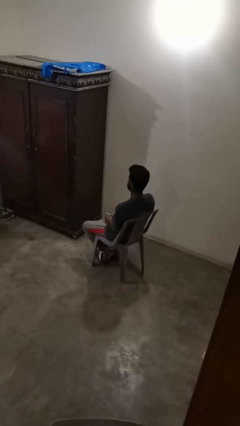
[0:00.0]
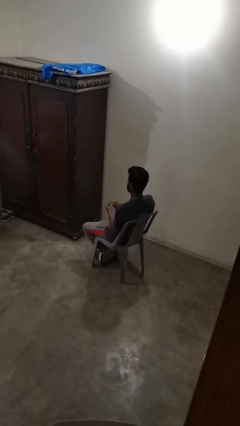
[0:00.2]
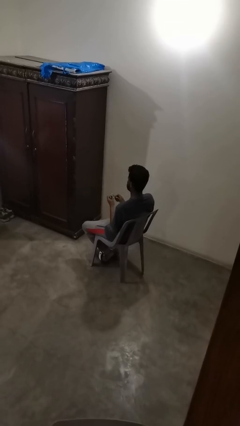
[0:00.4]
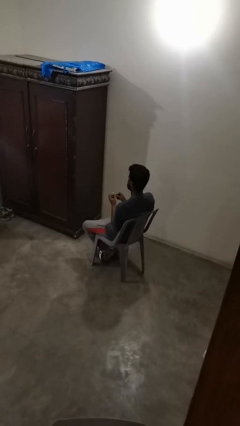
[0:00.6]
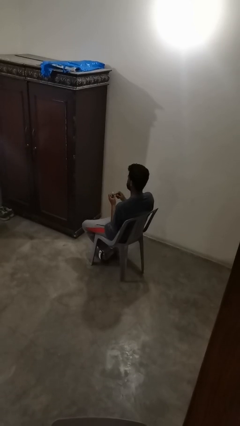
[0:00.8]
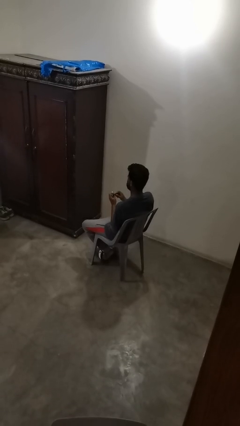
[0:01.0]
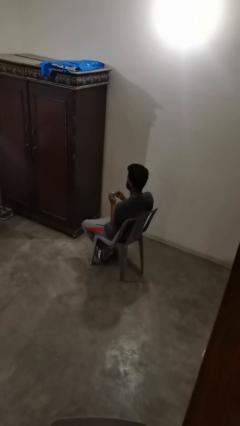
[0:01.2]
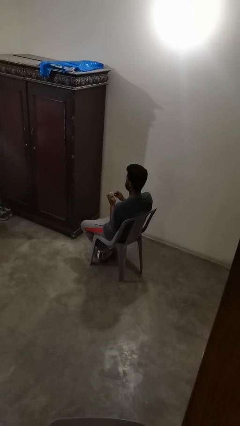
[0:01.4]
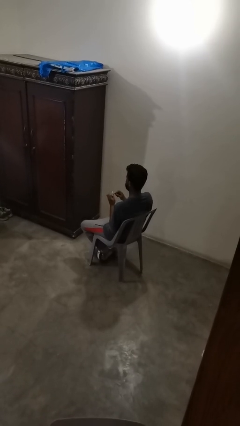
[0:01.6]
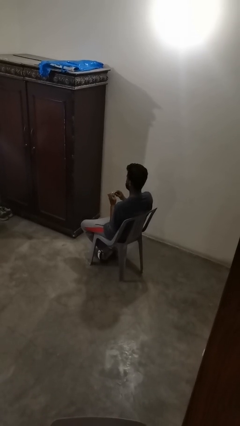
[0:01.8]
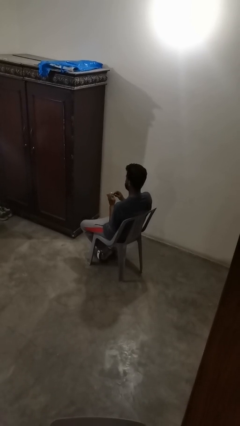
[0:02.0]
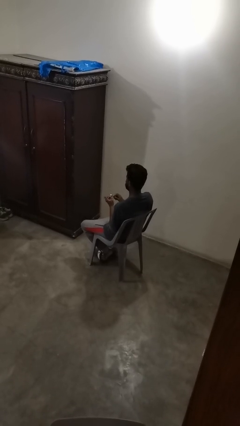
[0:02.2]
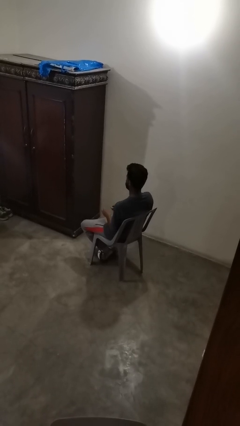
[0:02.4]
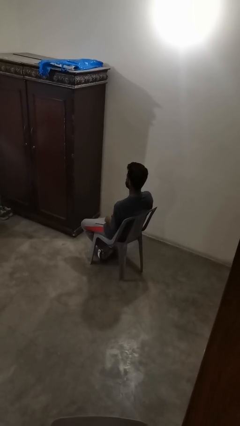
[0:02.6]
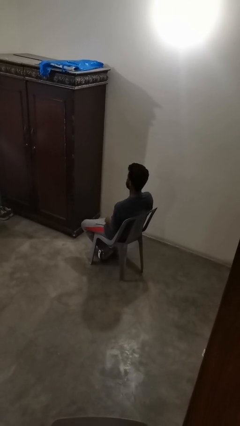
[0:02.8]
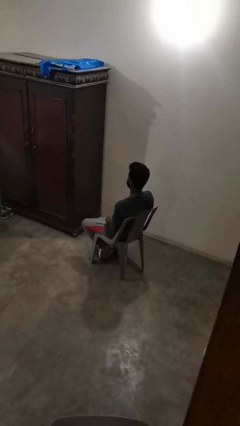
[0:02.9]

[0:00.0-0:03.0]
person files fingernails

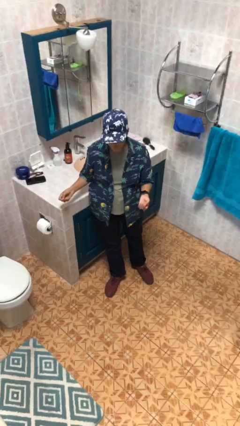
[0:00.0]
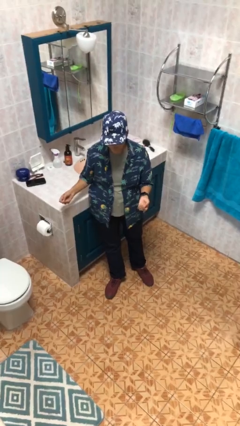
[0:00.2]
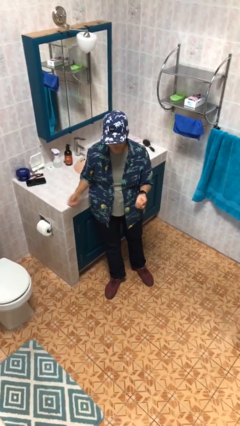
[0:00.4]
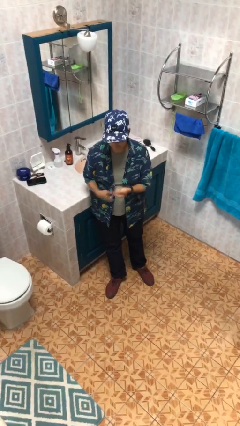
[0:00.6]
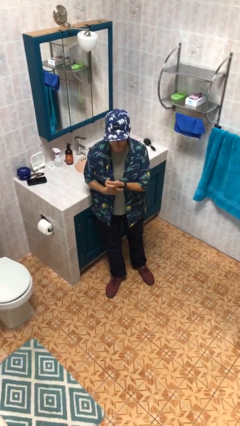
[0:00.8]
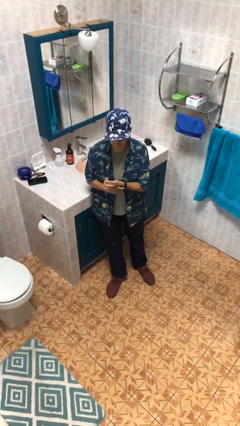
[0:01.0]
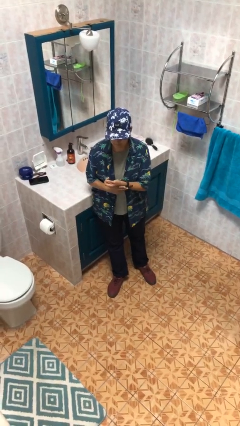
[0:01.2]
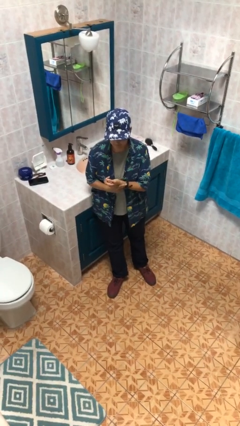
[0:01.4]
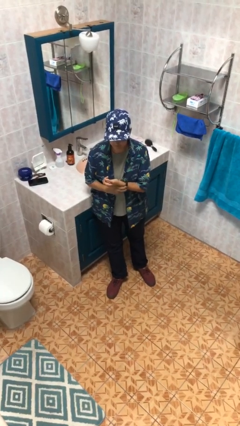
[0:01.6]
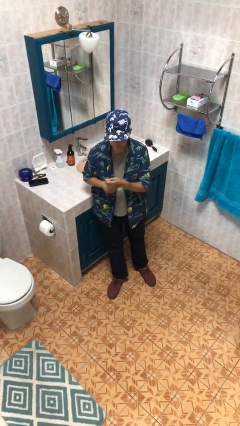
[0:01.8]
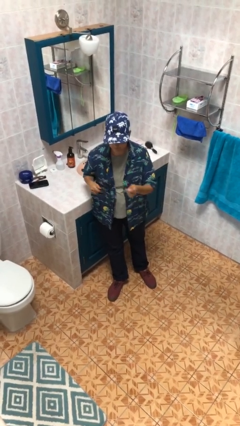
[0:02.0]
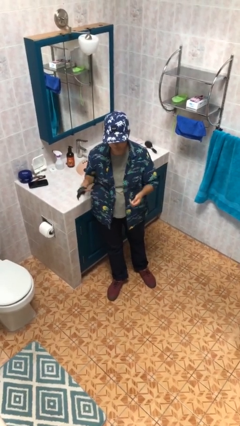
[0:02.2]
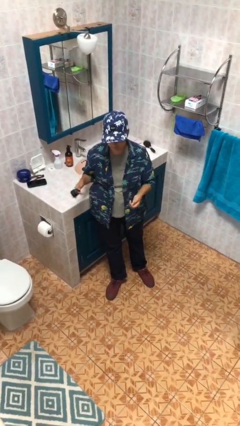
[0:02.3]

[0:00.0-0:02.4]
person takes off wristwatch

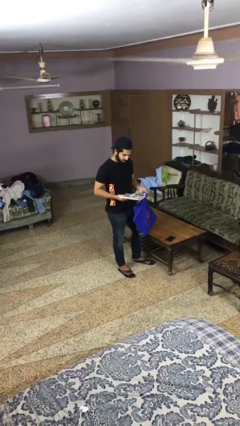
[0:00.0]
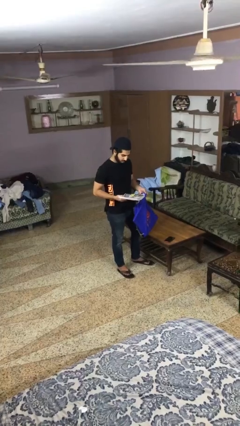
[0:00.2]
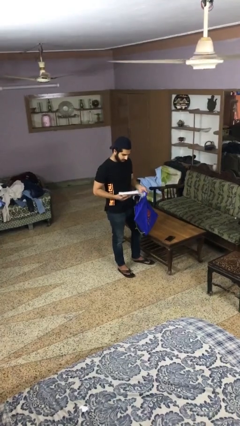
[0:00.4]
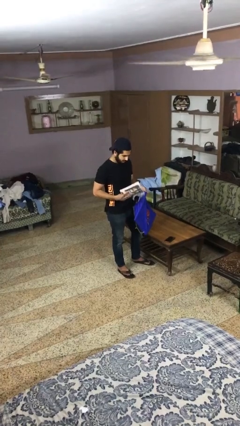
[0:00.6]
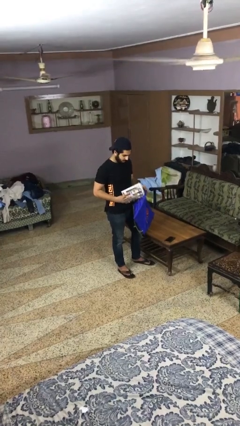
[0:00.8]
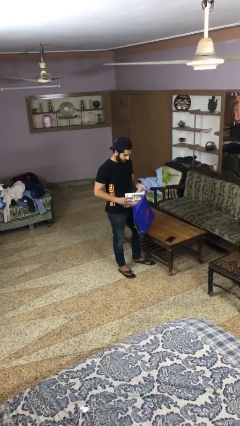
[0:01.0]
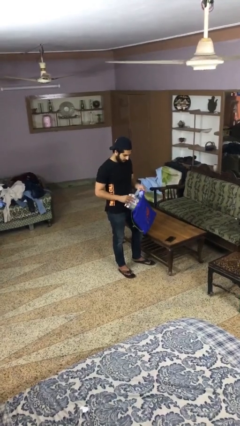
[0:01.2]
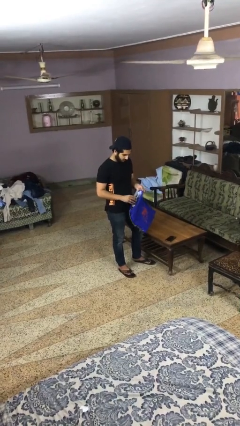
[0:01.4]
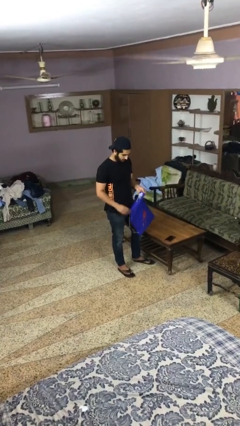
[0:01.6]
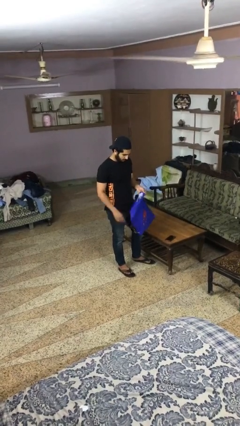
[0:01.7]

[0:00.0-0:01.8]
person puts object into bag

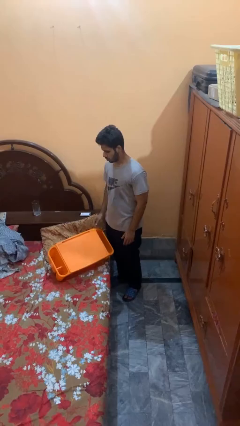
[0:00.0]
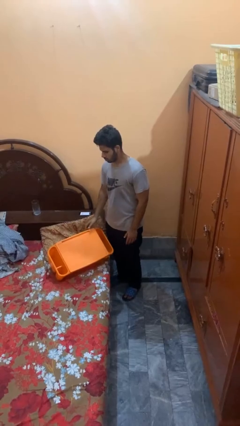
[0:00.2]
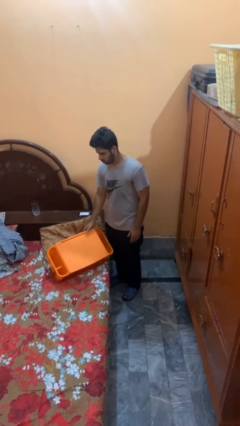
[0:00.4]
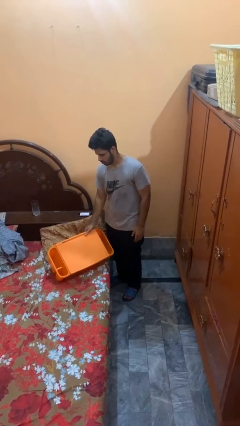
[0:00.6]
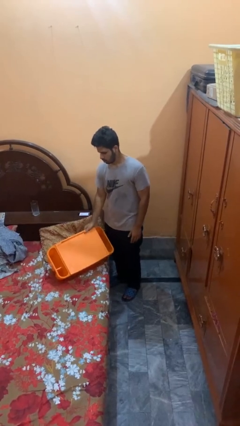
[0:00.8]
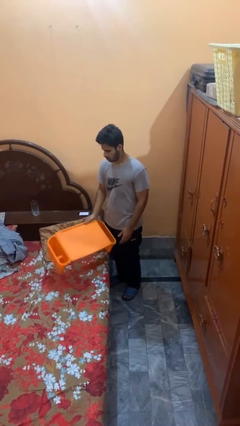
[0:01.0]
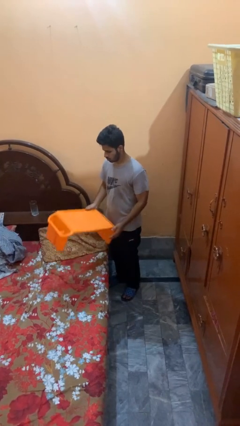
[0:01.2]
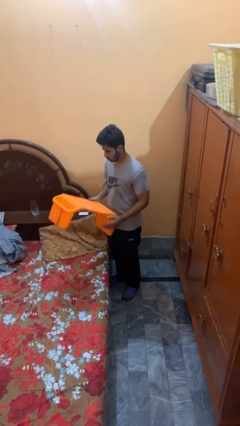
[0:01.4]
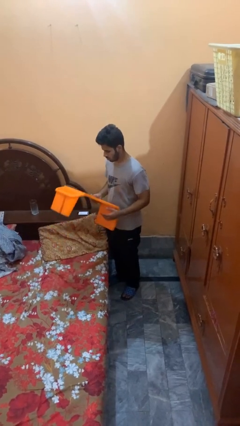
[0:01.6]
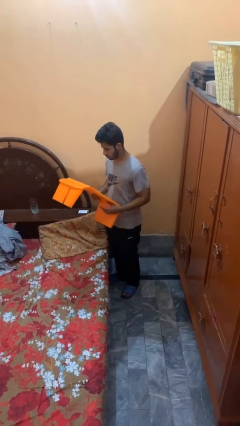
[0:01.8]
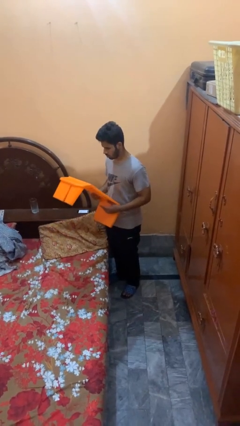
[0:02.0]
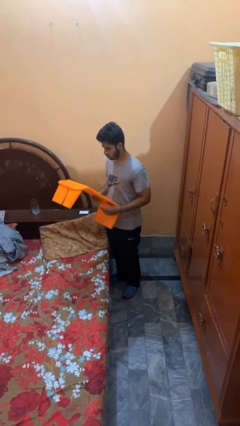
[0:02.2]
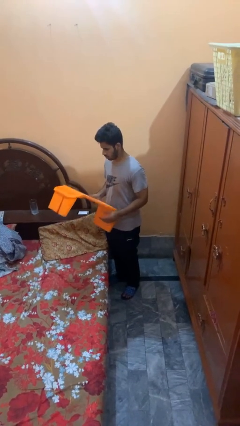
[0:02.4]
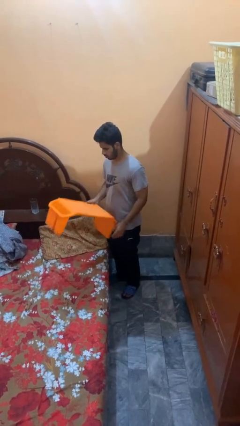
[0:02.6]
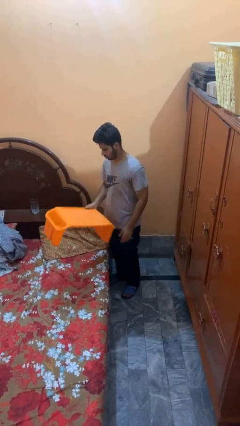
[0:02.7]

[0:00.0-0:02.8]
person picks up object from bed

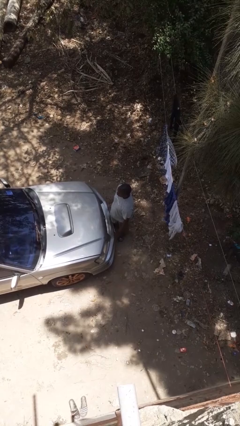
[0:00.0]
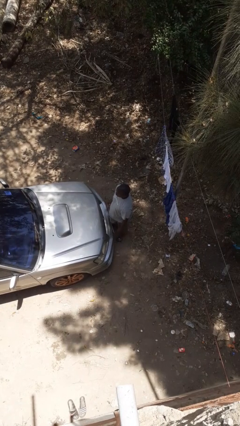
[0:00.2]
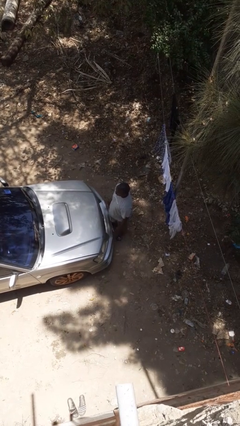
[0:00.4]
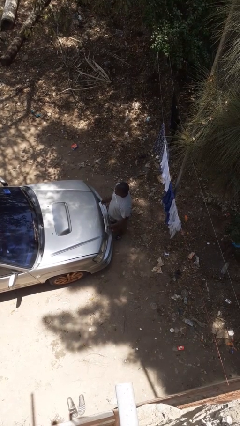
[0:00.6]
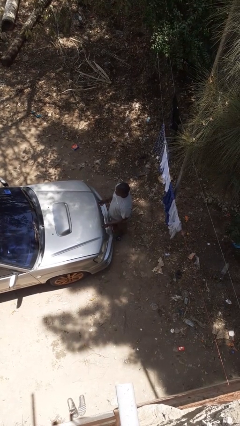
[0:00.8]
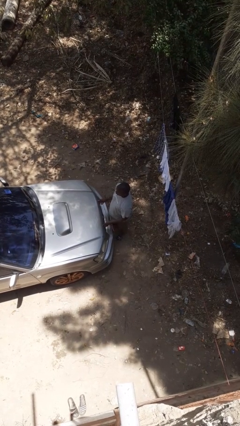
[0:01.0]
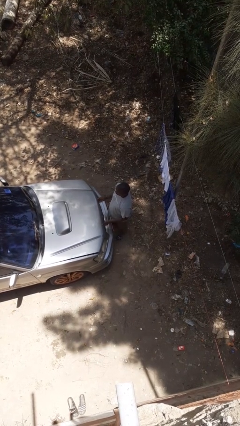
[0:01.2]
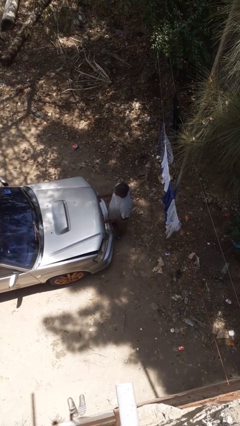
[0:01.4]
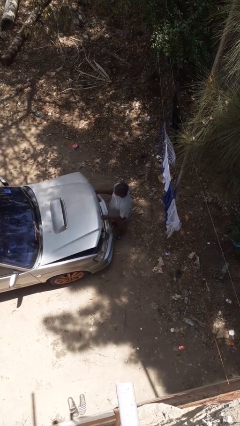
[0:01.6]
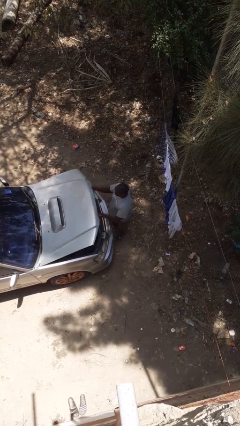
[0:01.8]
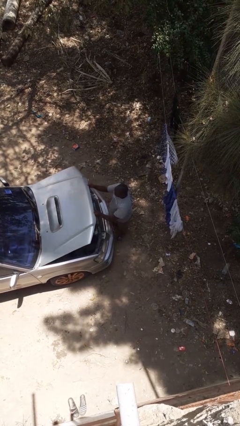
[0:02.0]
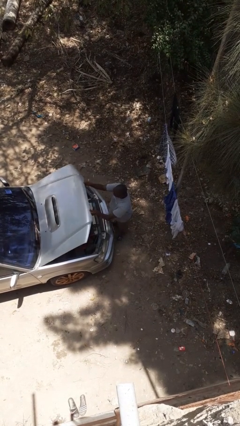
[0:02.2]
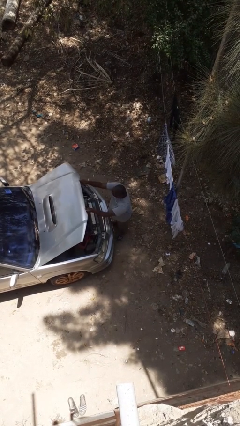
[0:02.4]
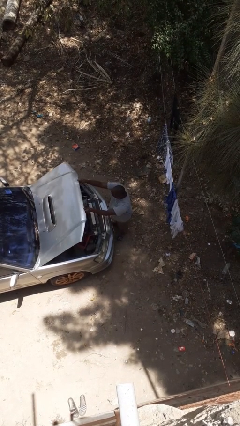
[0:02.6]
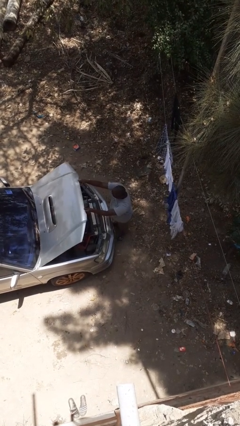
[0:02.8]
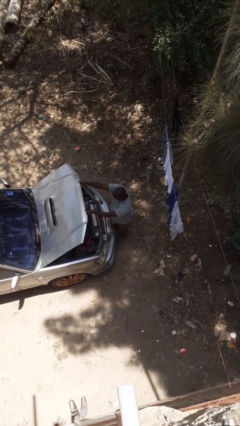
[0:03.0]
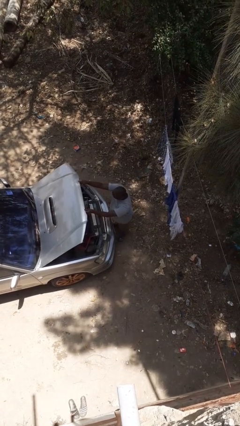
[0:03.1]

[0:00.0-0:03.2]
person opens car hood

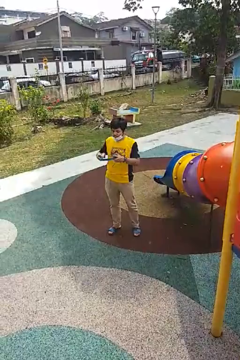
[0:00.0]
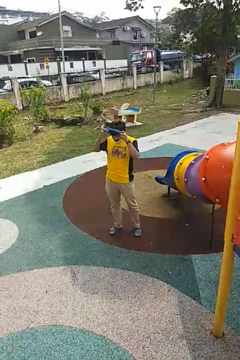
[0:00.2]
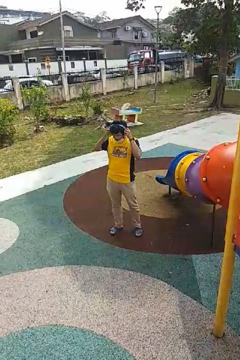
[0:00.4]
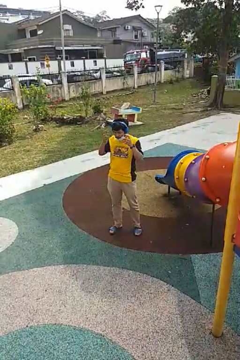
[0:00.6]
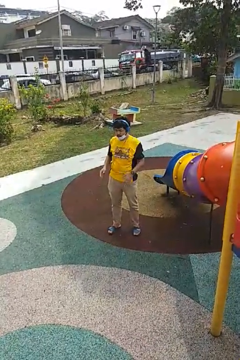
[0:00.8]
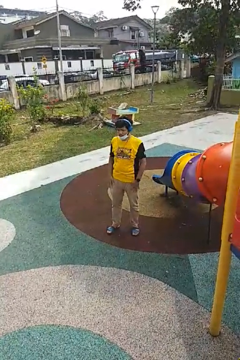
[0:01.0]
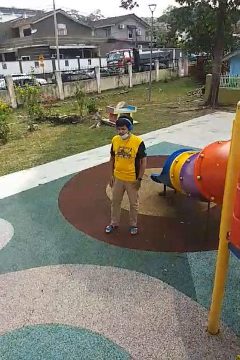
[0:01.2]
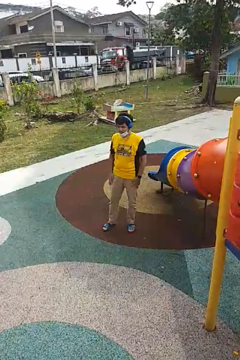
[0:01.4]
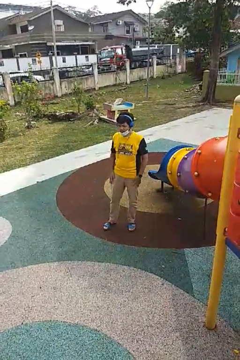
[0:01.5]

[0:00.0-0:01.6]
person puts on headphones

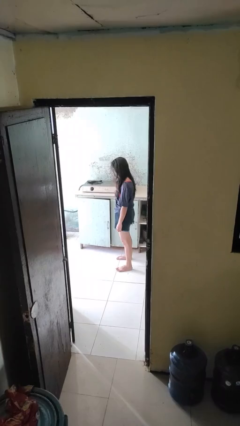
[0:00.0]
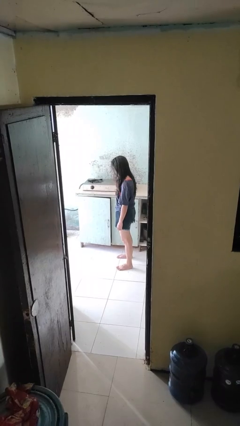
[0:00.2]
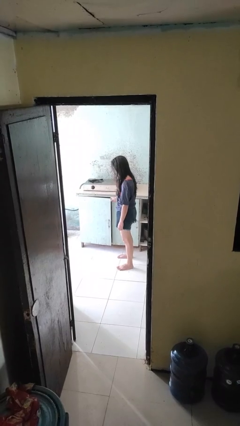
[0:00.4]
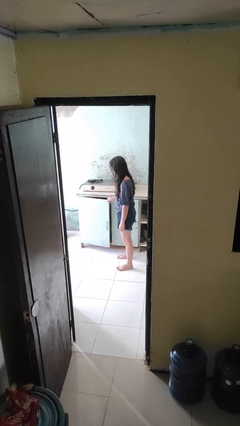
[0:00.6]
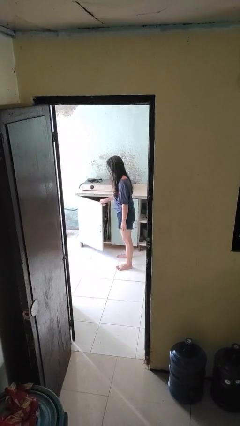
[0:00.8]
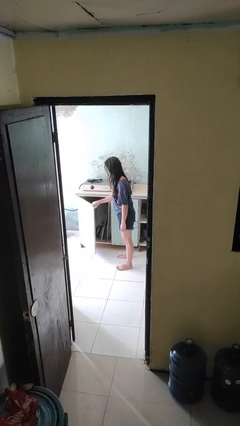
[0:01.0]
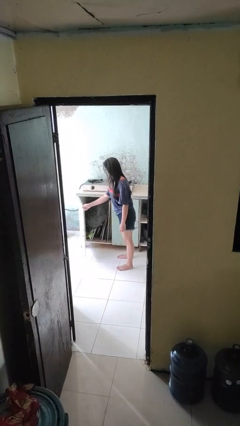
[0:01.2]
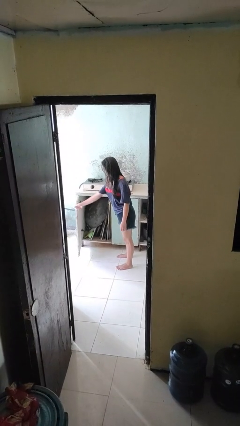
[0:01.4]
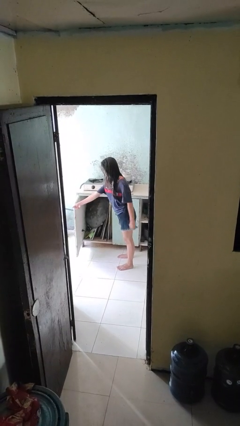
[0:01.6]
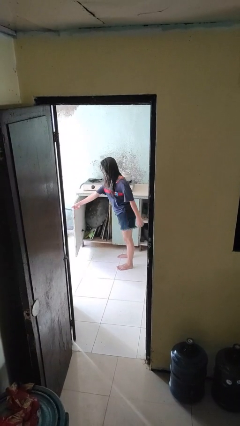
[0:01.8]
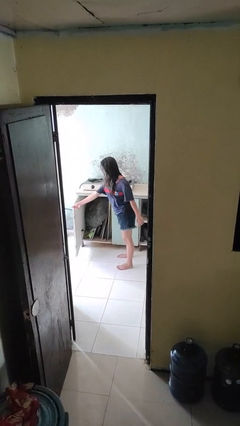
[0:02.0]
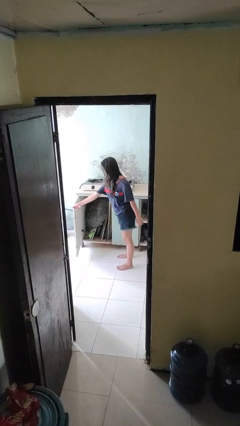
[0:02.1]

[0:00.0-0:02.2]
person opens cabinet

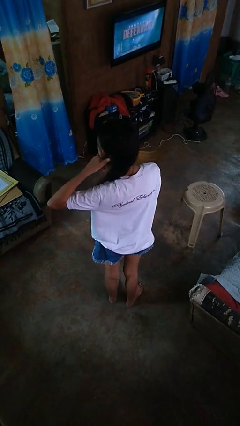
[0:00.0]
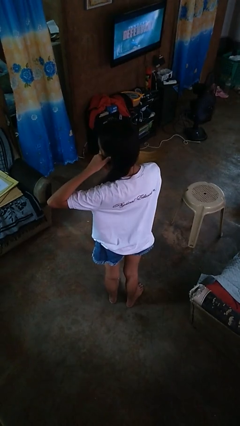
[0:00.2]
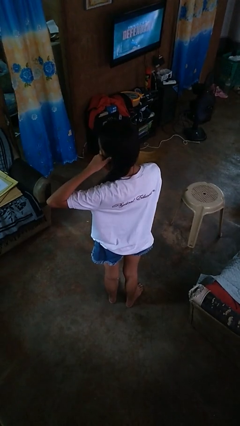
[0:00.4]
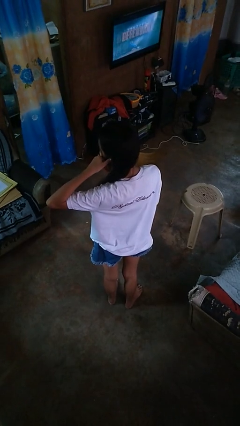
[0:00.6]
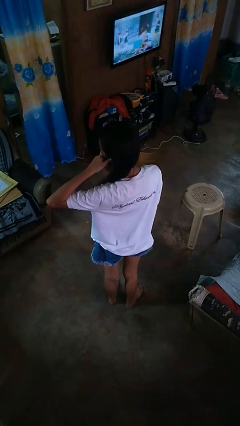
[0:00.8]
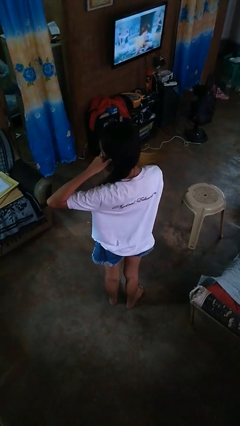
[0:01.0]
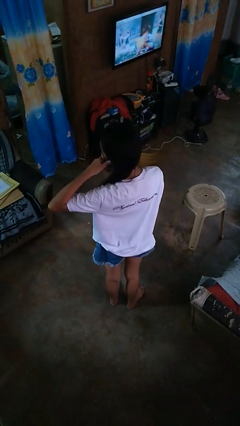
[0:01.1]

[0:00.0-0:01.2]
person gestures call me
